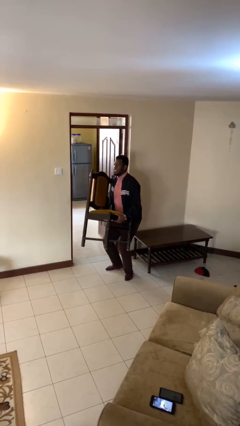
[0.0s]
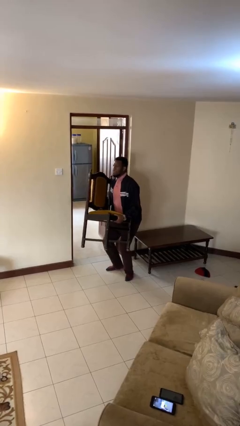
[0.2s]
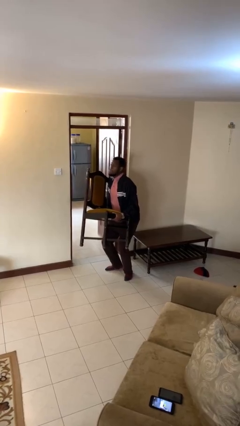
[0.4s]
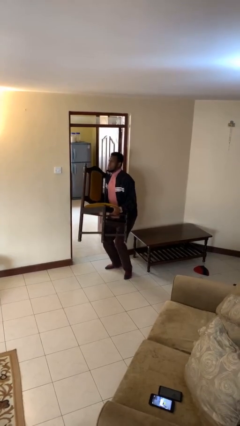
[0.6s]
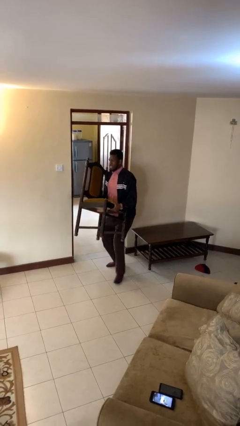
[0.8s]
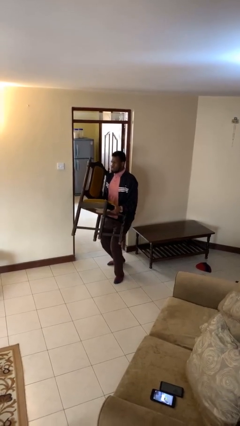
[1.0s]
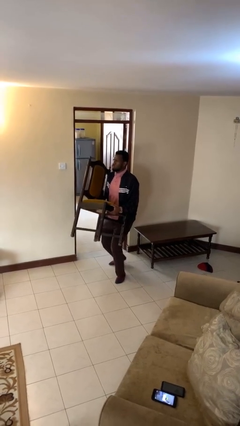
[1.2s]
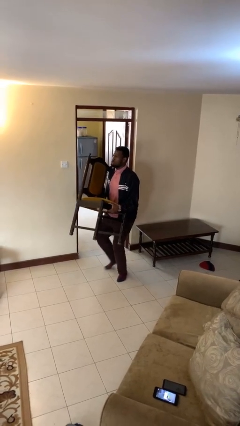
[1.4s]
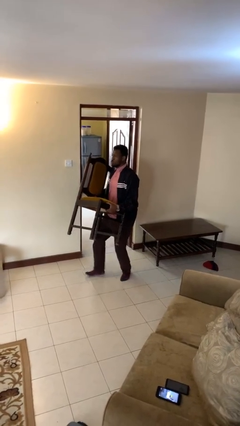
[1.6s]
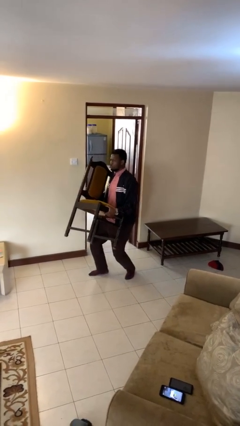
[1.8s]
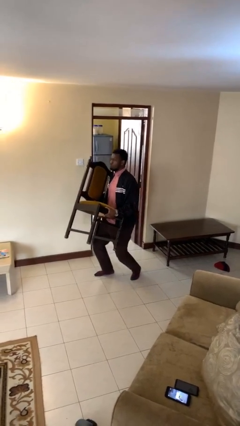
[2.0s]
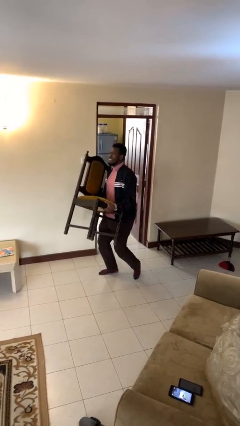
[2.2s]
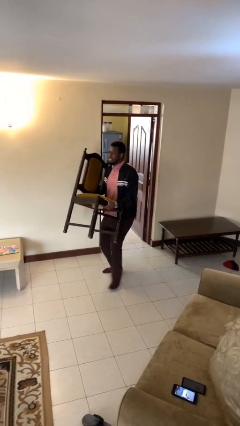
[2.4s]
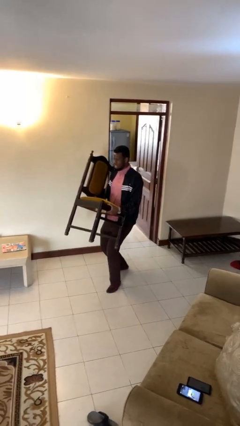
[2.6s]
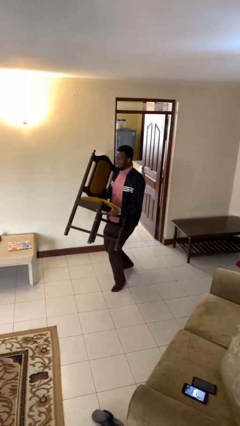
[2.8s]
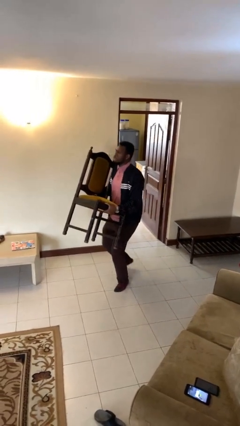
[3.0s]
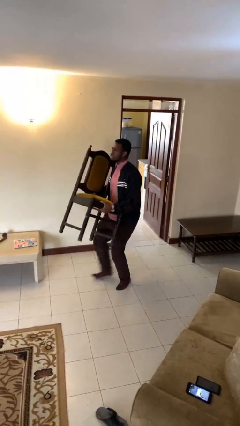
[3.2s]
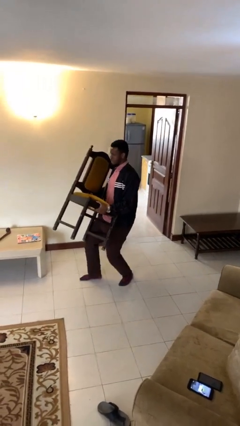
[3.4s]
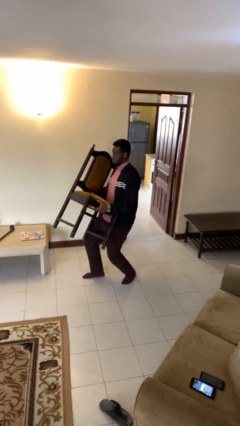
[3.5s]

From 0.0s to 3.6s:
person carries heavy object

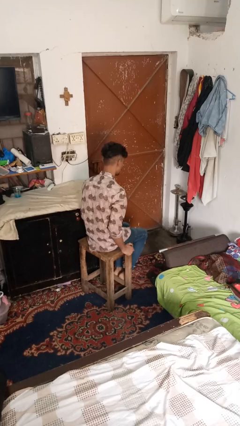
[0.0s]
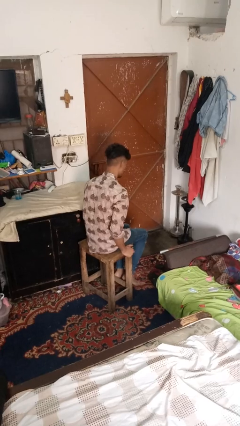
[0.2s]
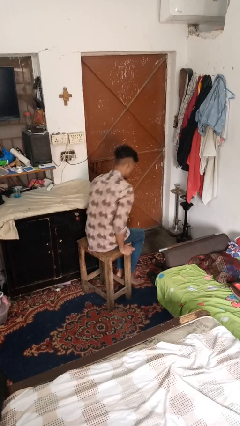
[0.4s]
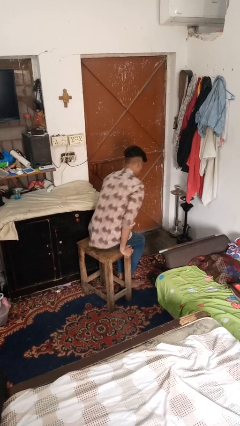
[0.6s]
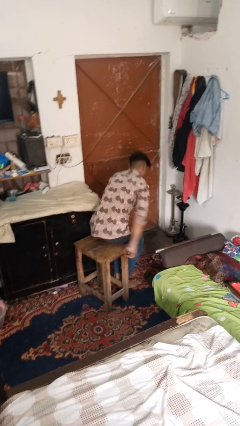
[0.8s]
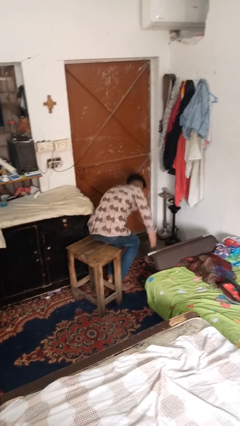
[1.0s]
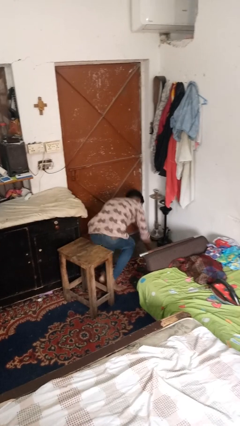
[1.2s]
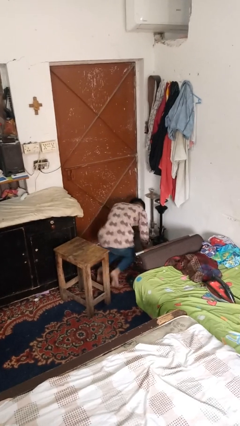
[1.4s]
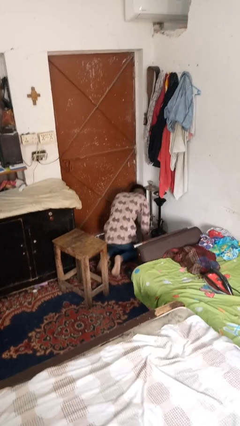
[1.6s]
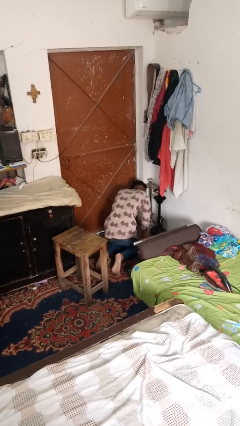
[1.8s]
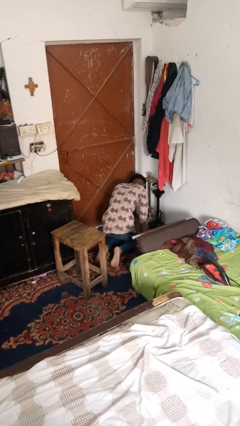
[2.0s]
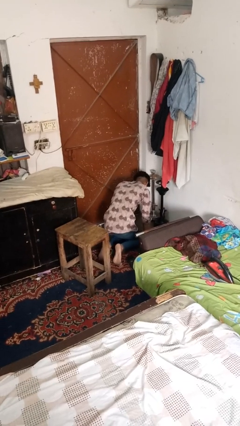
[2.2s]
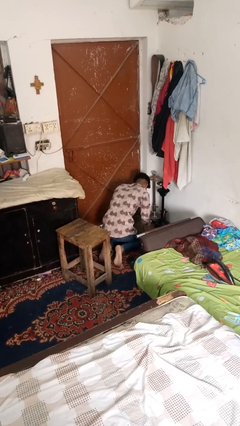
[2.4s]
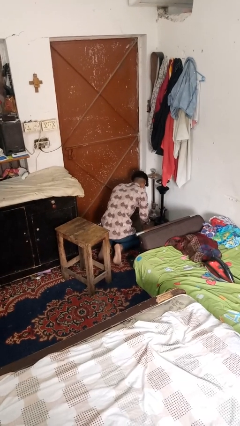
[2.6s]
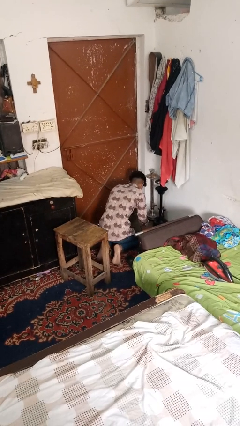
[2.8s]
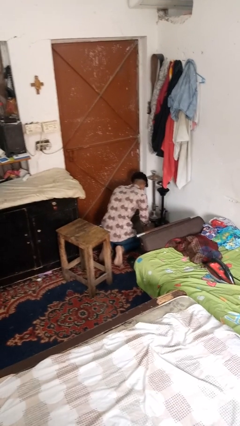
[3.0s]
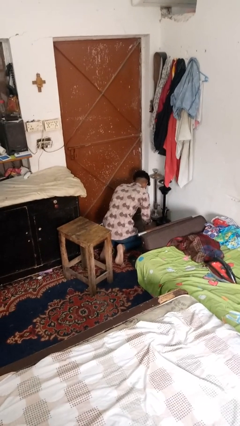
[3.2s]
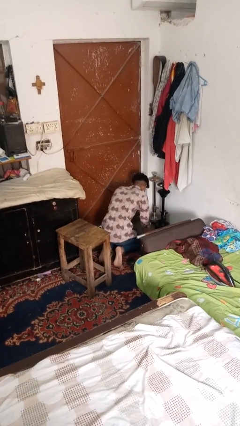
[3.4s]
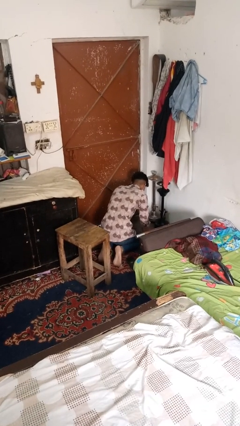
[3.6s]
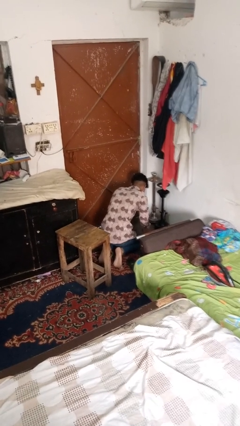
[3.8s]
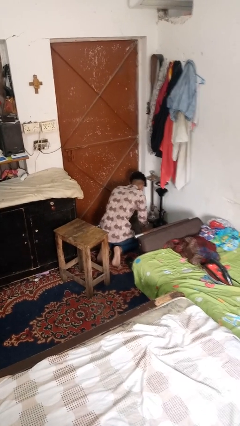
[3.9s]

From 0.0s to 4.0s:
person falls from chair

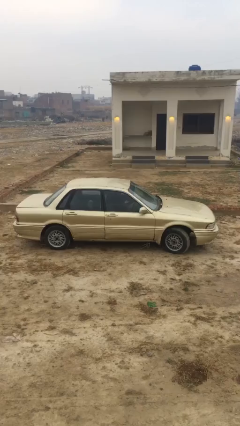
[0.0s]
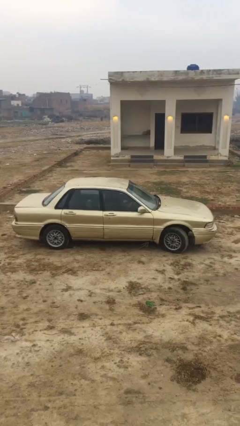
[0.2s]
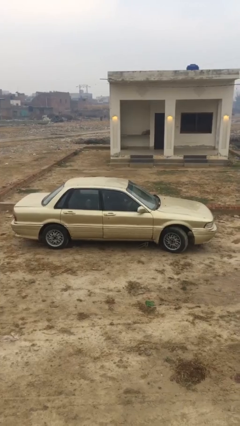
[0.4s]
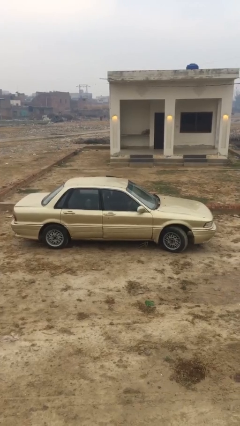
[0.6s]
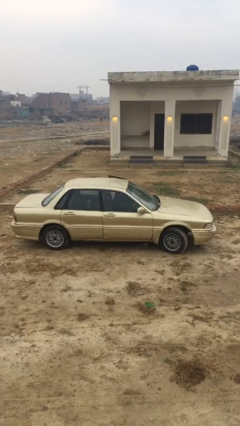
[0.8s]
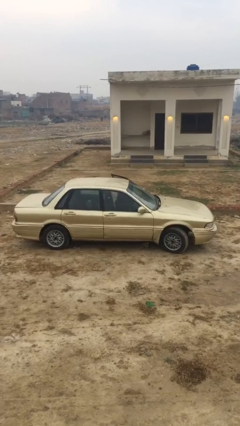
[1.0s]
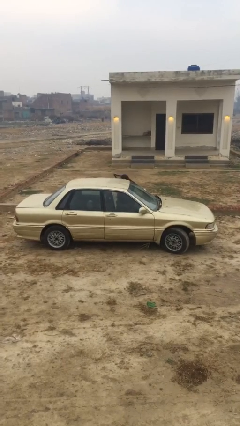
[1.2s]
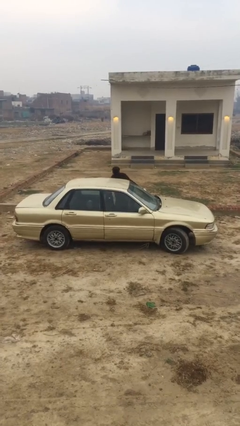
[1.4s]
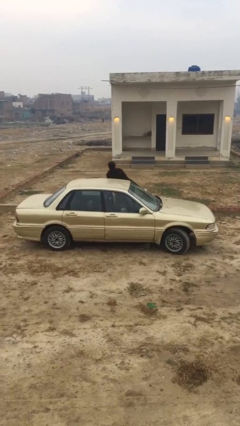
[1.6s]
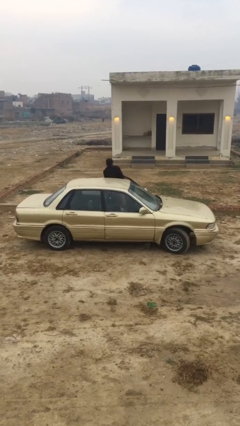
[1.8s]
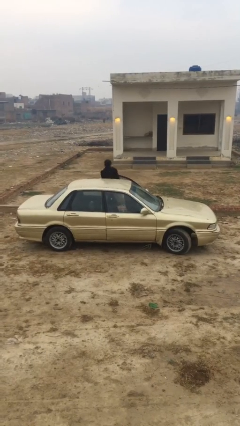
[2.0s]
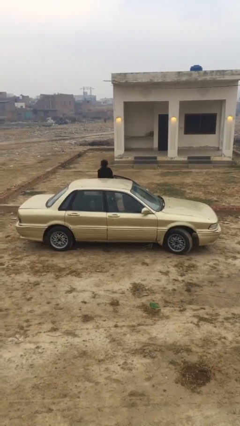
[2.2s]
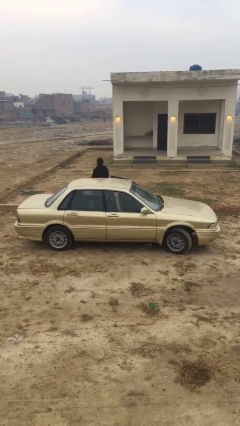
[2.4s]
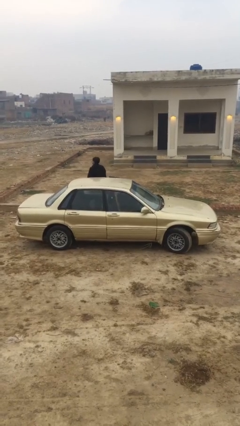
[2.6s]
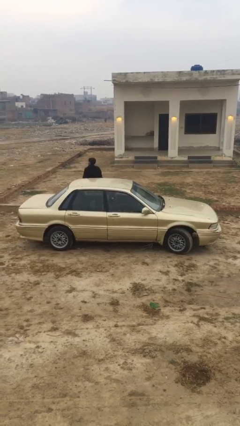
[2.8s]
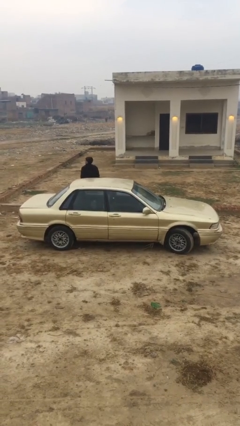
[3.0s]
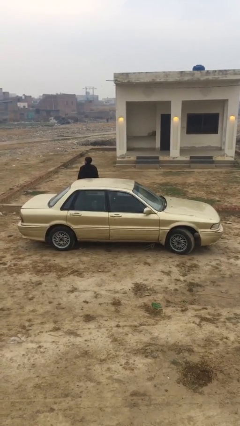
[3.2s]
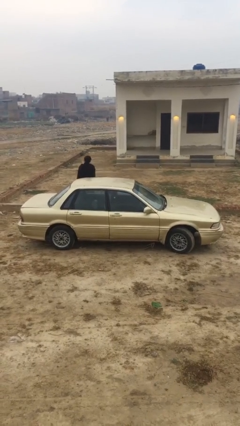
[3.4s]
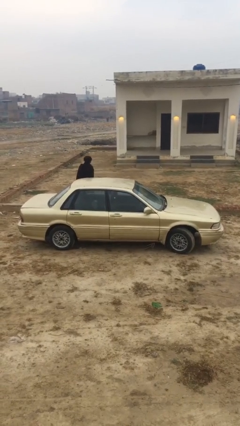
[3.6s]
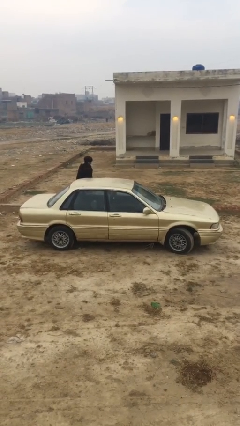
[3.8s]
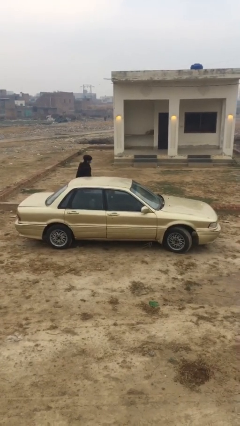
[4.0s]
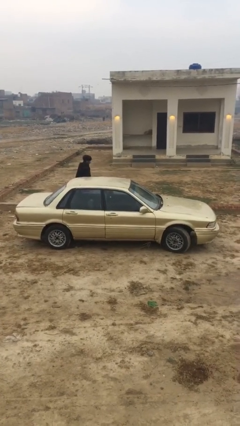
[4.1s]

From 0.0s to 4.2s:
car drops off person

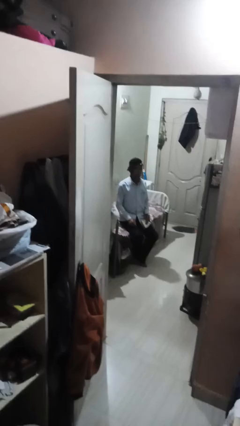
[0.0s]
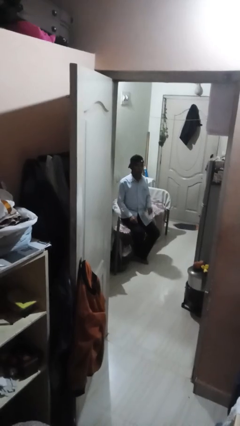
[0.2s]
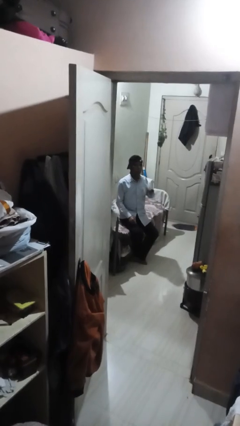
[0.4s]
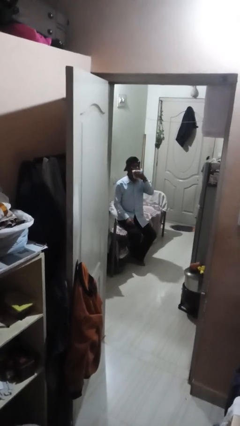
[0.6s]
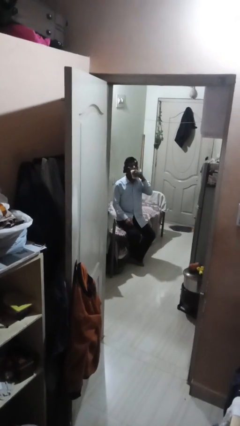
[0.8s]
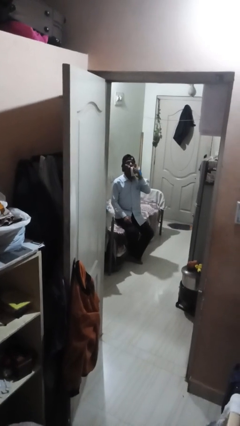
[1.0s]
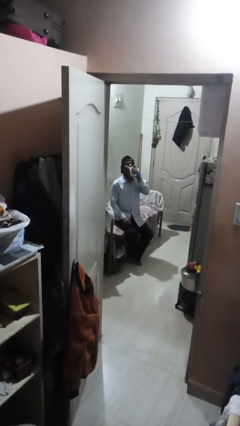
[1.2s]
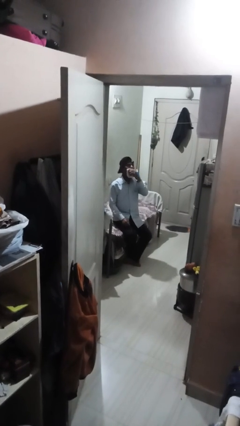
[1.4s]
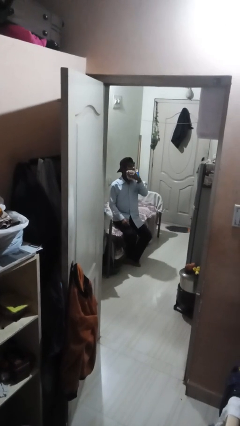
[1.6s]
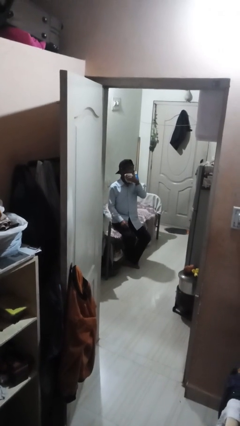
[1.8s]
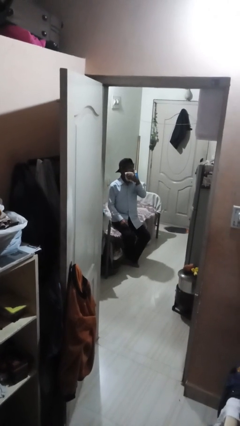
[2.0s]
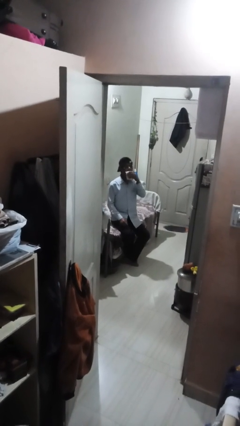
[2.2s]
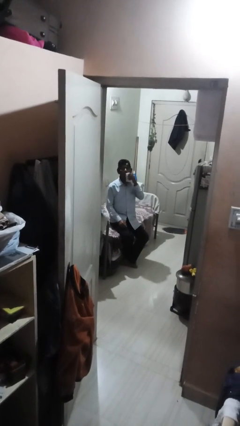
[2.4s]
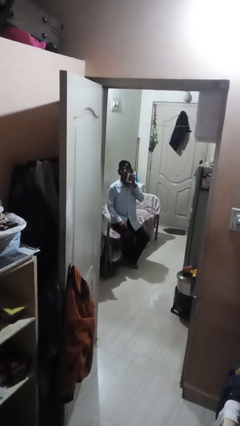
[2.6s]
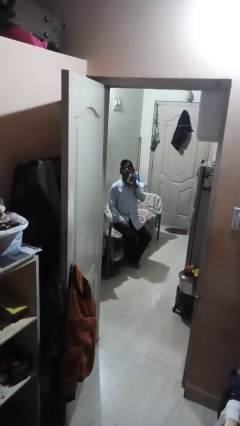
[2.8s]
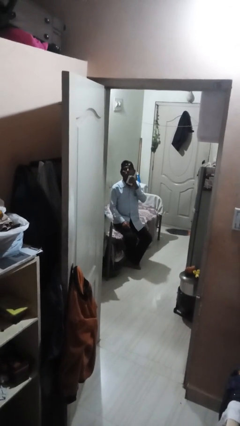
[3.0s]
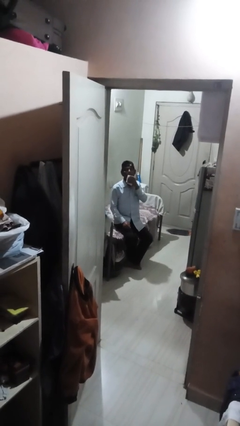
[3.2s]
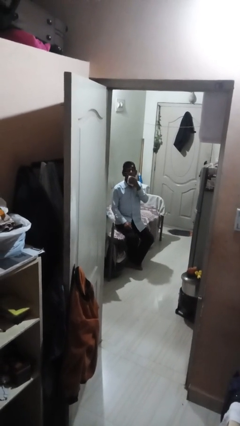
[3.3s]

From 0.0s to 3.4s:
person wipes mouth with napkin

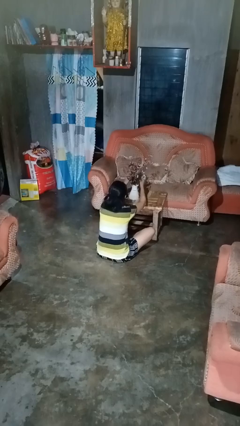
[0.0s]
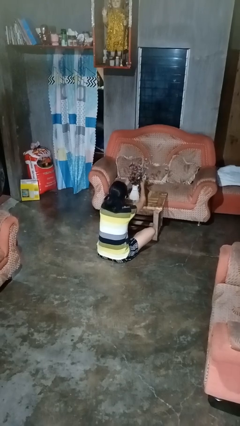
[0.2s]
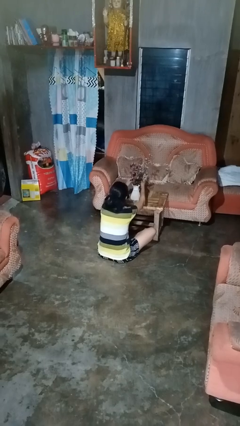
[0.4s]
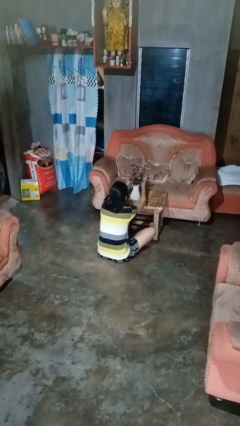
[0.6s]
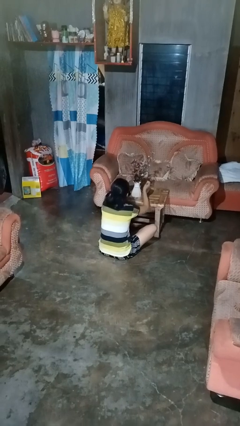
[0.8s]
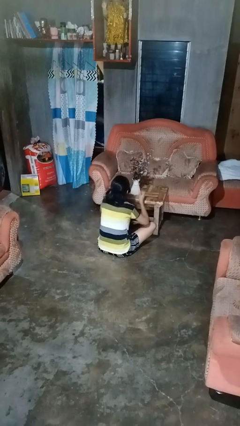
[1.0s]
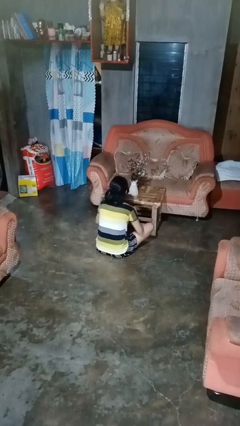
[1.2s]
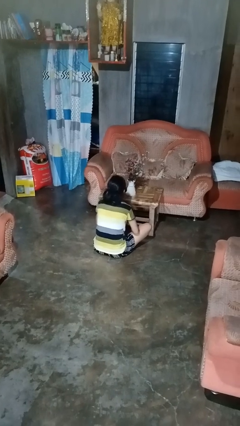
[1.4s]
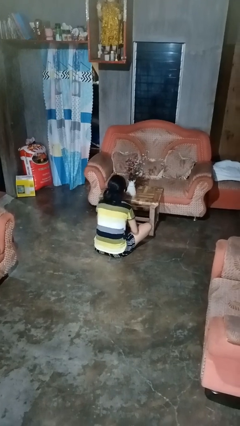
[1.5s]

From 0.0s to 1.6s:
person arranges flowers in vase

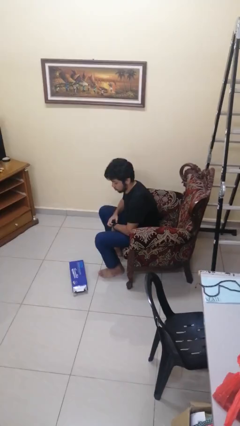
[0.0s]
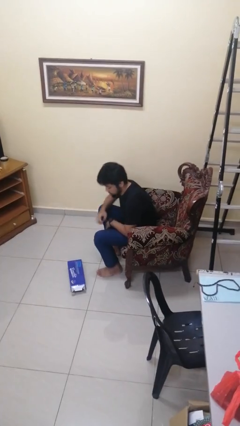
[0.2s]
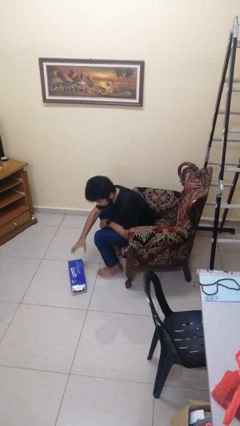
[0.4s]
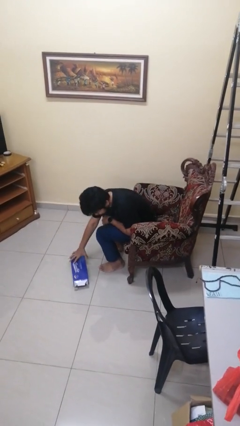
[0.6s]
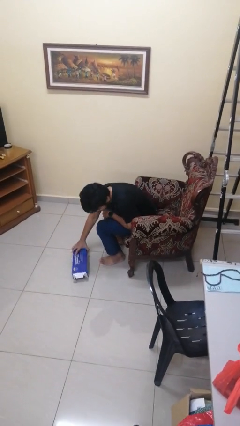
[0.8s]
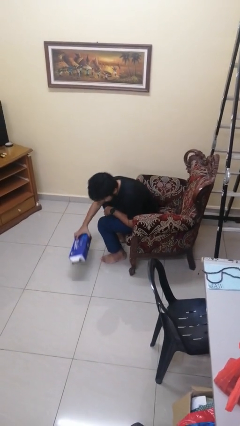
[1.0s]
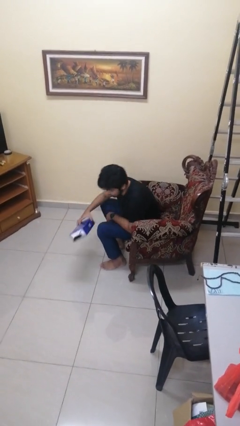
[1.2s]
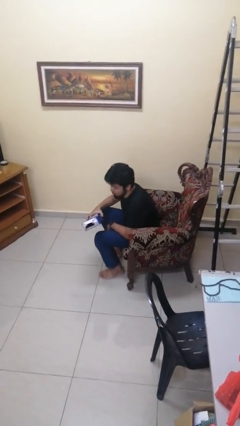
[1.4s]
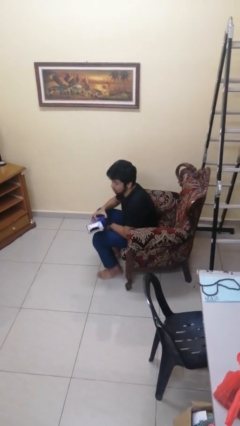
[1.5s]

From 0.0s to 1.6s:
person picks up object from floor
